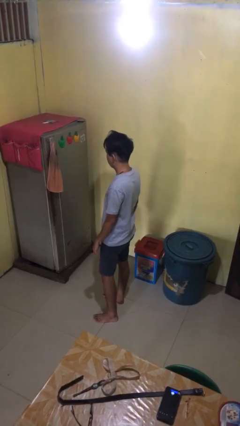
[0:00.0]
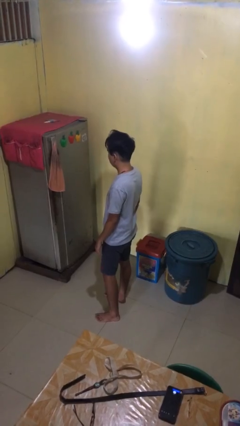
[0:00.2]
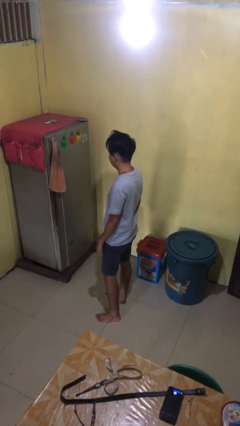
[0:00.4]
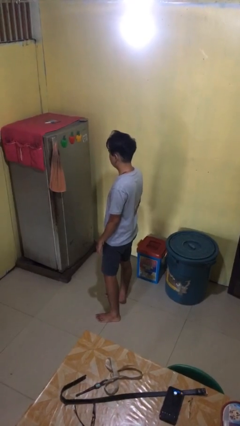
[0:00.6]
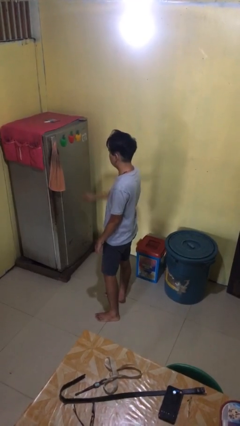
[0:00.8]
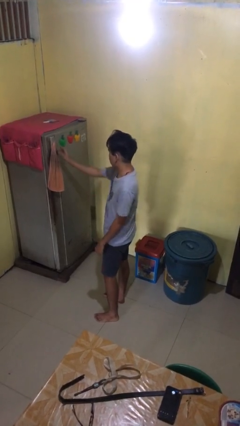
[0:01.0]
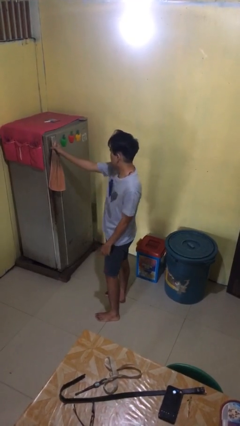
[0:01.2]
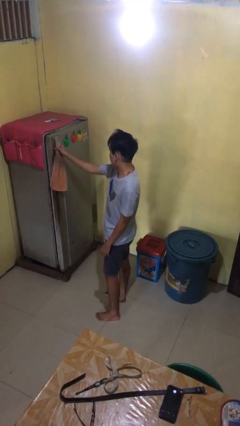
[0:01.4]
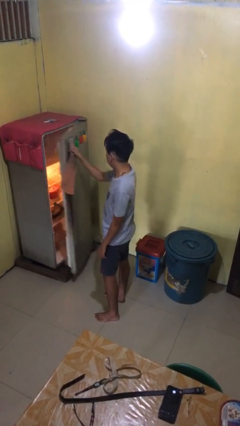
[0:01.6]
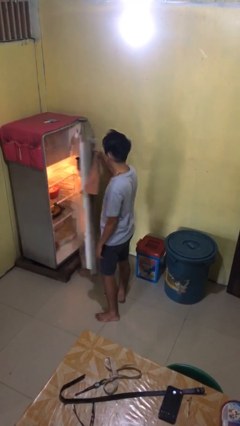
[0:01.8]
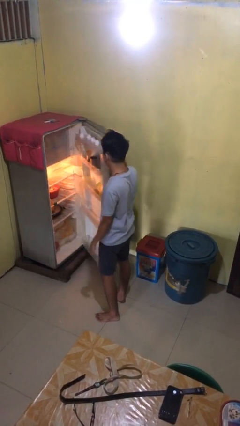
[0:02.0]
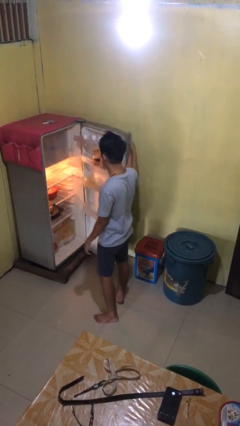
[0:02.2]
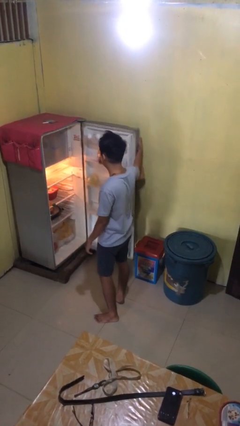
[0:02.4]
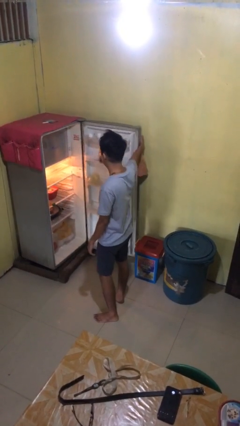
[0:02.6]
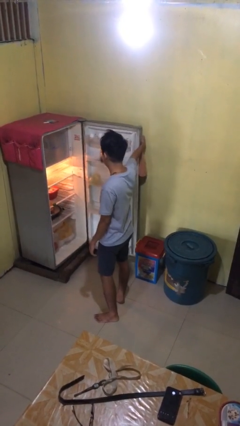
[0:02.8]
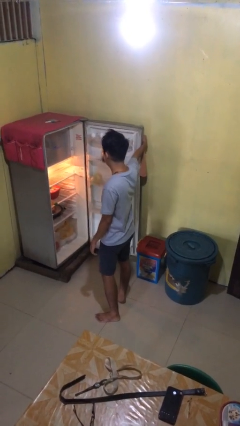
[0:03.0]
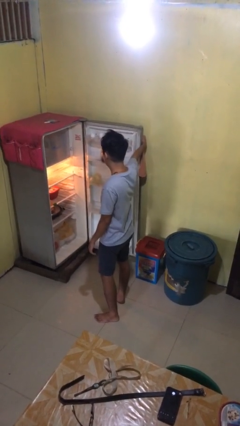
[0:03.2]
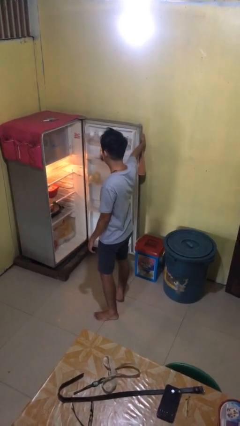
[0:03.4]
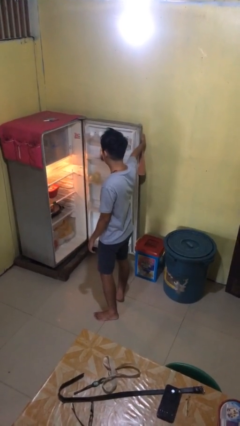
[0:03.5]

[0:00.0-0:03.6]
person opens refrigerator

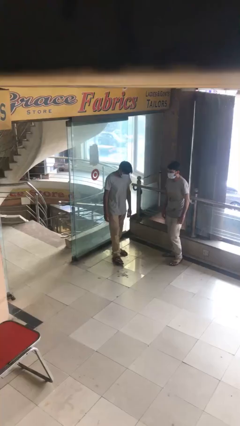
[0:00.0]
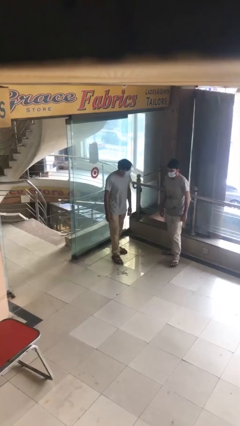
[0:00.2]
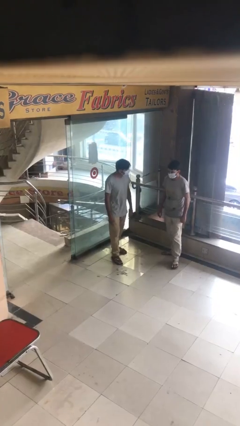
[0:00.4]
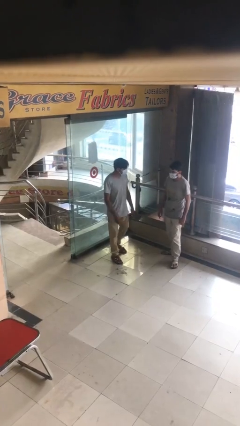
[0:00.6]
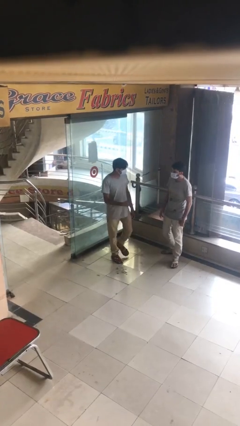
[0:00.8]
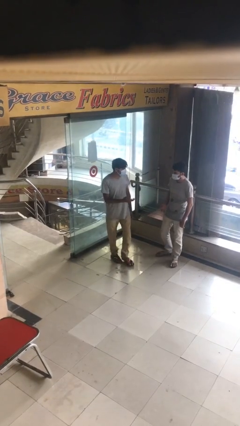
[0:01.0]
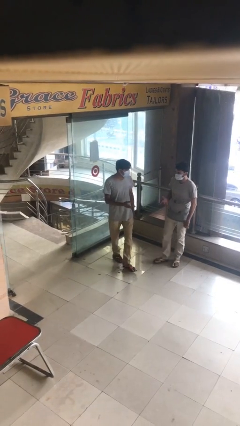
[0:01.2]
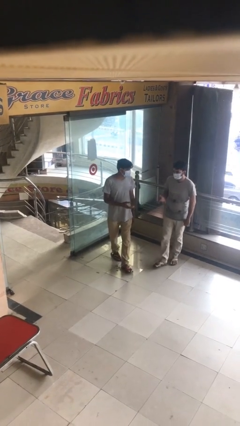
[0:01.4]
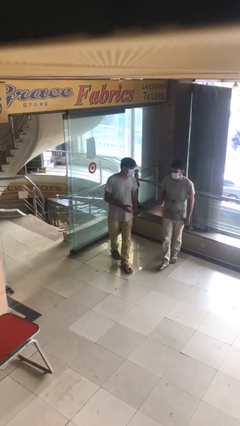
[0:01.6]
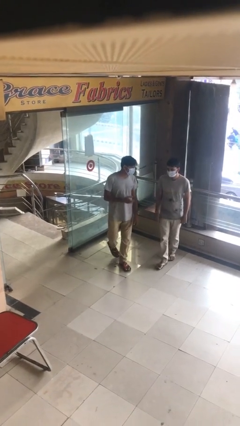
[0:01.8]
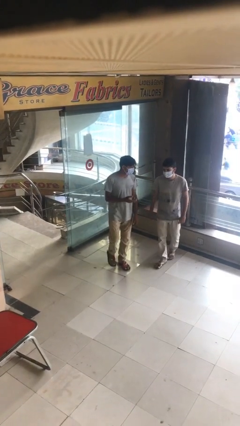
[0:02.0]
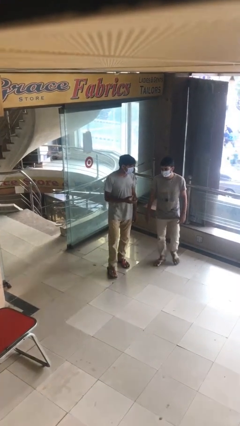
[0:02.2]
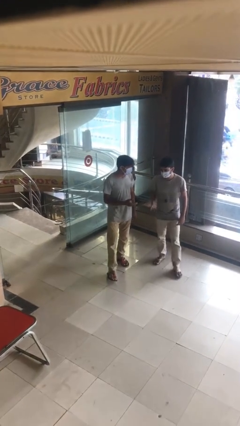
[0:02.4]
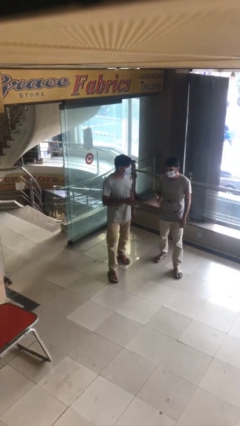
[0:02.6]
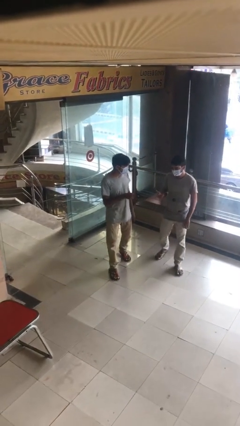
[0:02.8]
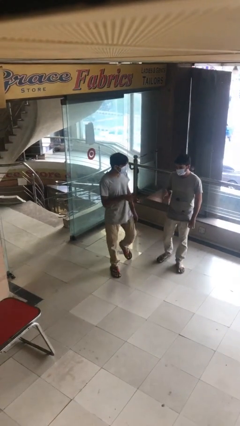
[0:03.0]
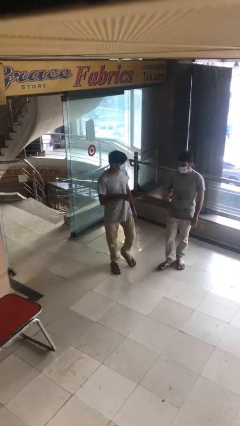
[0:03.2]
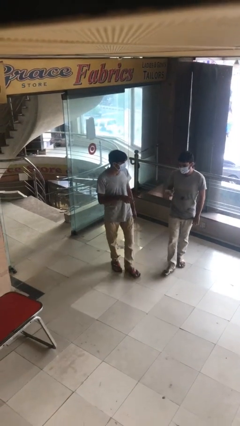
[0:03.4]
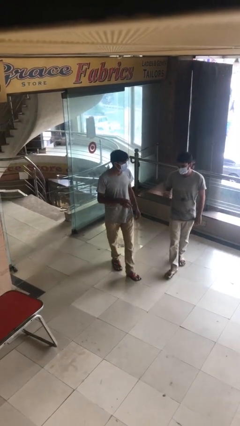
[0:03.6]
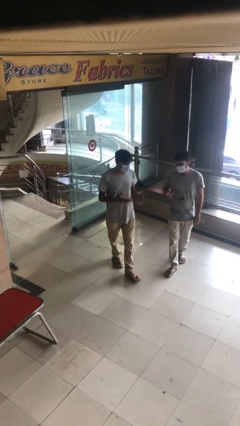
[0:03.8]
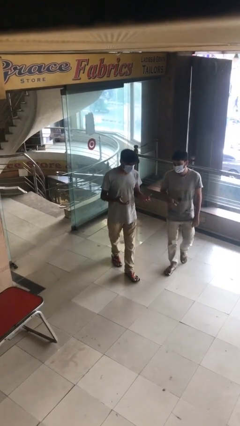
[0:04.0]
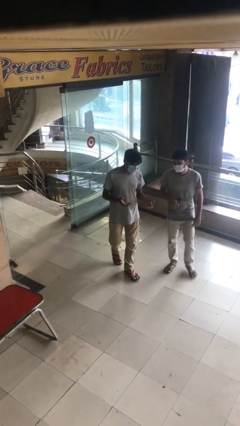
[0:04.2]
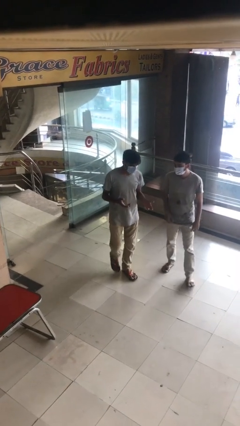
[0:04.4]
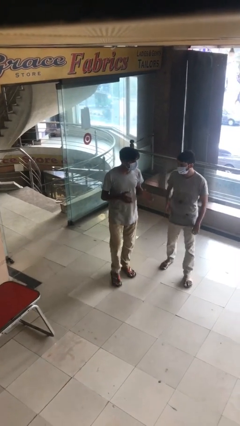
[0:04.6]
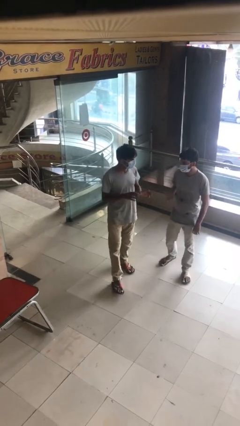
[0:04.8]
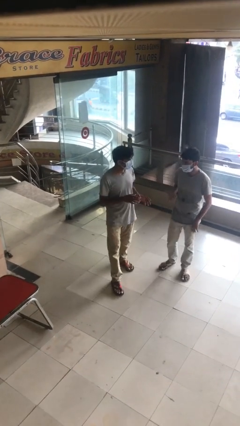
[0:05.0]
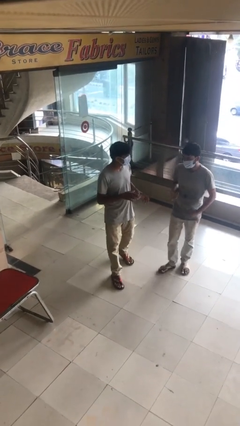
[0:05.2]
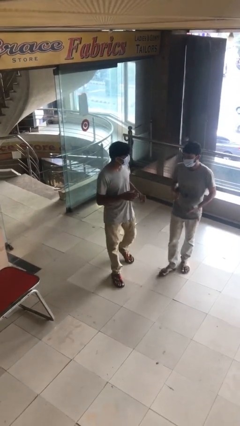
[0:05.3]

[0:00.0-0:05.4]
person talks to person

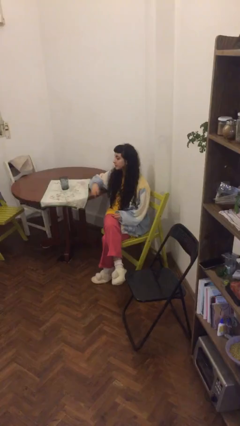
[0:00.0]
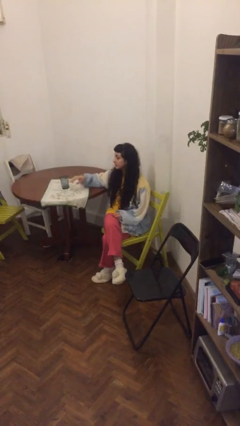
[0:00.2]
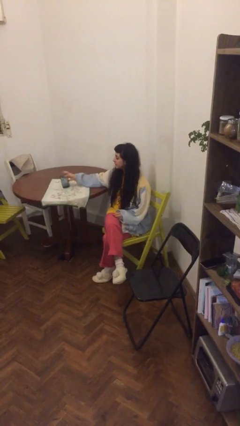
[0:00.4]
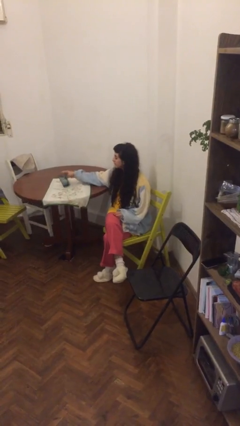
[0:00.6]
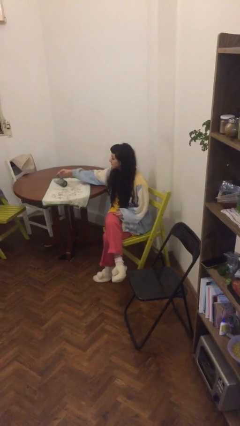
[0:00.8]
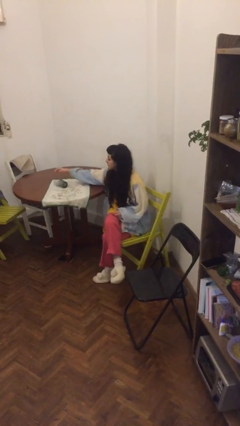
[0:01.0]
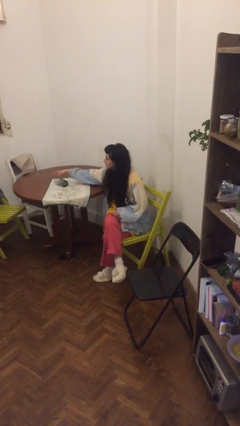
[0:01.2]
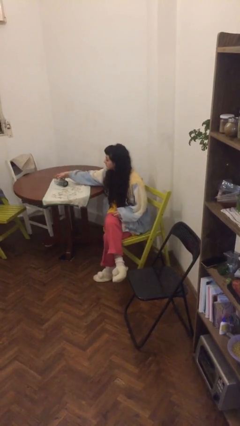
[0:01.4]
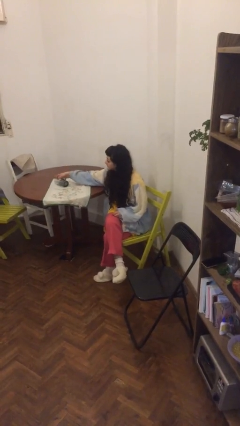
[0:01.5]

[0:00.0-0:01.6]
person knocks over glass

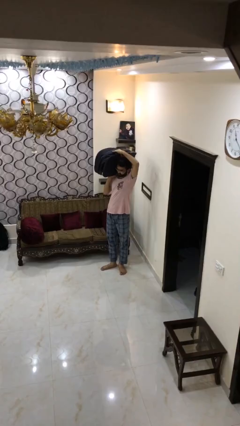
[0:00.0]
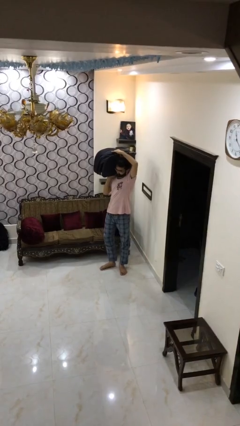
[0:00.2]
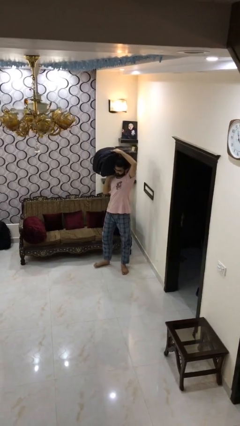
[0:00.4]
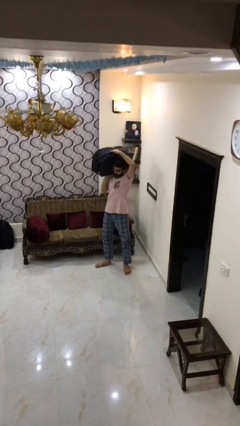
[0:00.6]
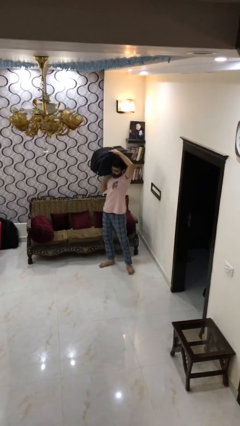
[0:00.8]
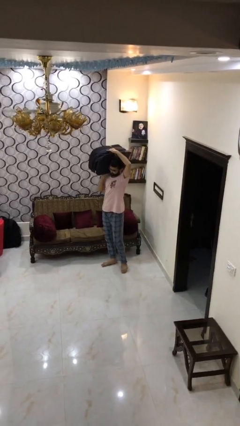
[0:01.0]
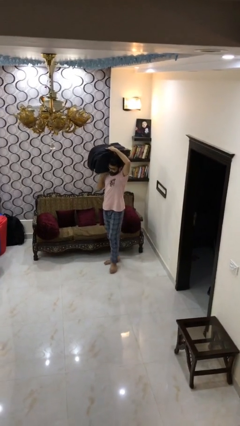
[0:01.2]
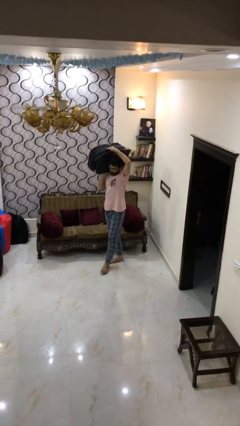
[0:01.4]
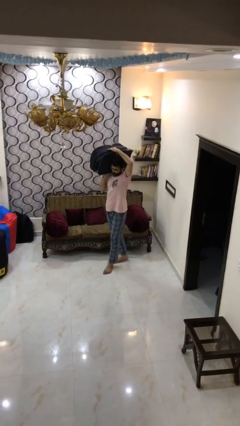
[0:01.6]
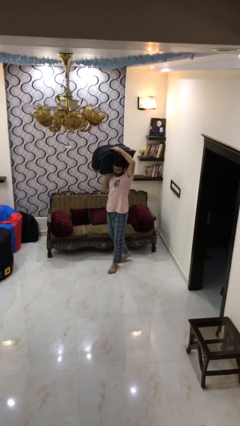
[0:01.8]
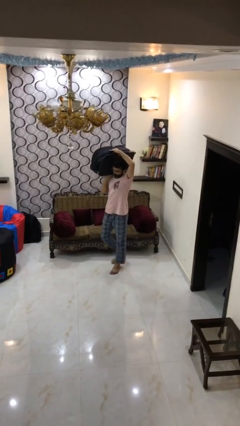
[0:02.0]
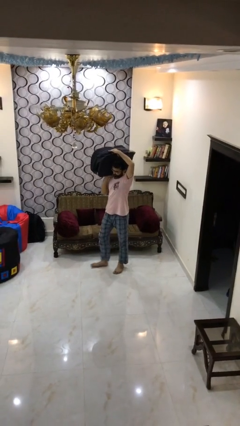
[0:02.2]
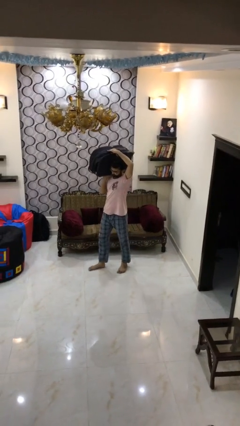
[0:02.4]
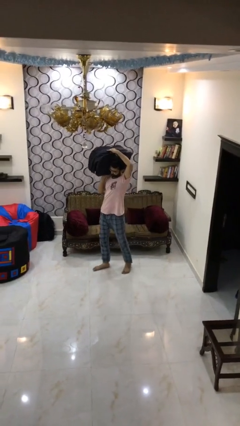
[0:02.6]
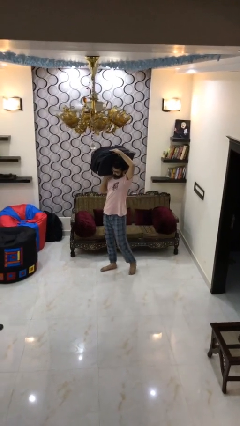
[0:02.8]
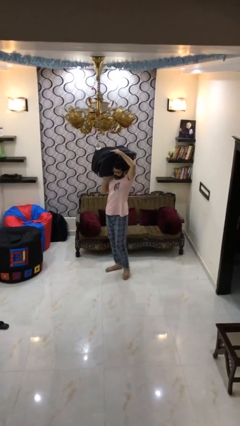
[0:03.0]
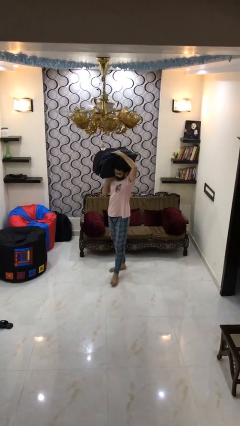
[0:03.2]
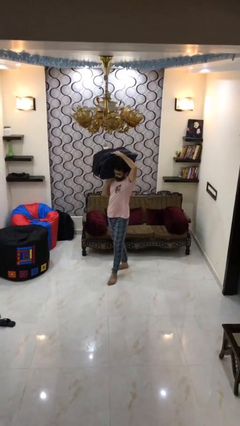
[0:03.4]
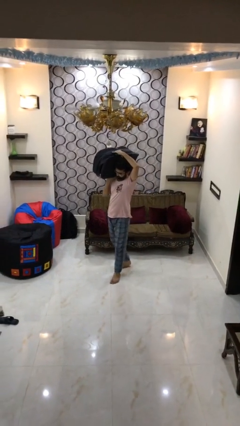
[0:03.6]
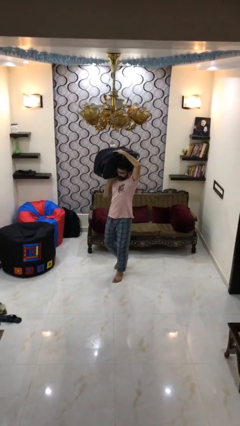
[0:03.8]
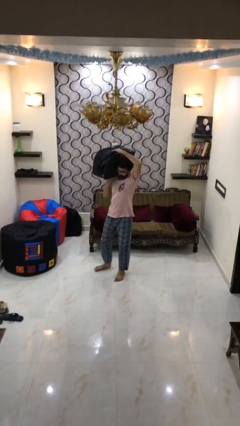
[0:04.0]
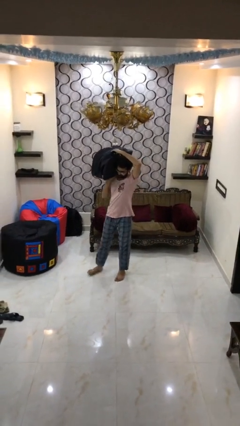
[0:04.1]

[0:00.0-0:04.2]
person carries heavy object

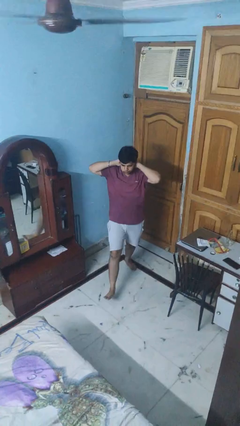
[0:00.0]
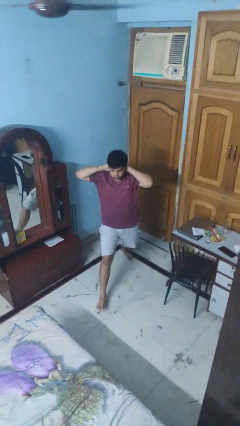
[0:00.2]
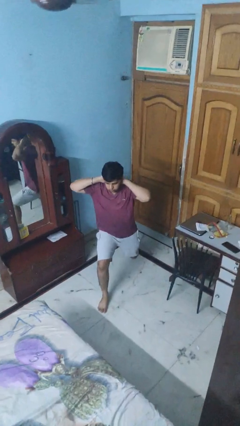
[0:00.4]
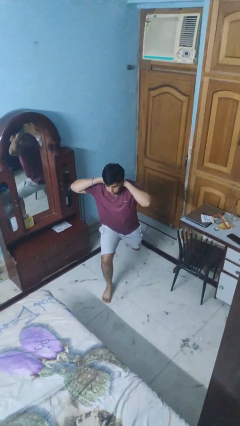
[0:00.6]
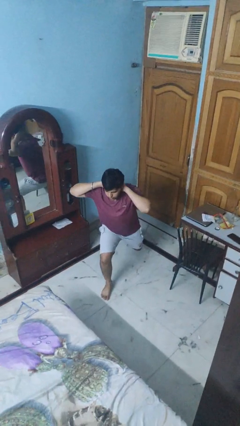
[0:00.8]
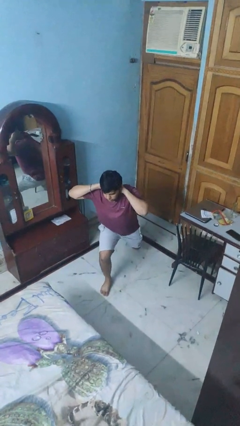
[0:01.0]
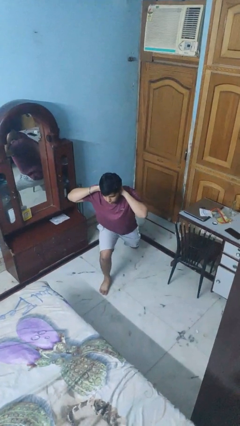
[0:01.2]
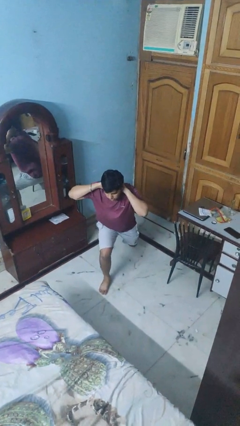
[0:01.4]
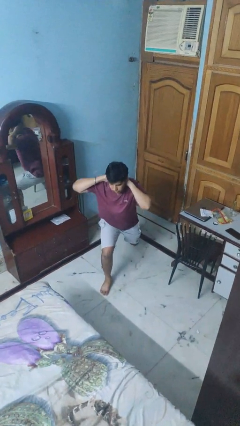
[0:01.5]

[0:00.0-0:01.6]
person exercises with lunges

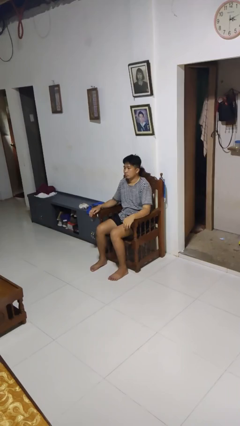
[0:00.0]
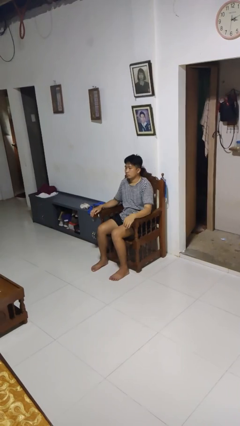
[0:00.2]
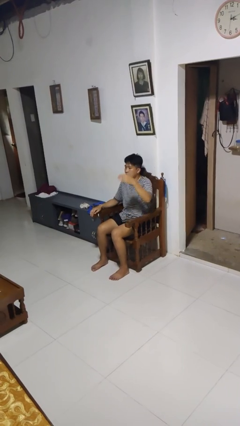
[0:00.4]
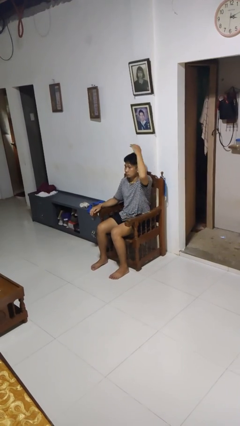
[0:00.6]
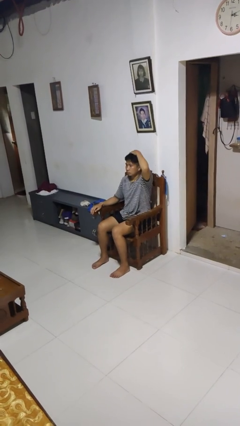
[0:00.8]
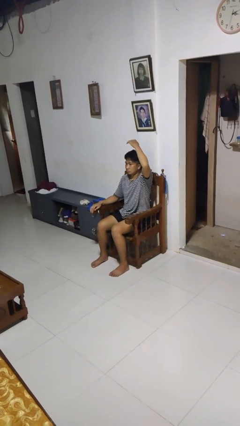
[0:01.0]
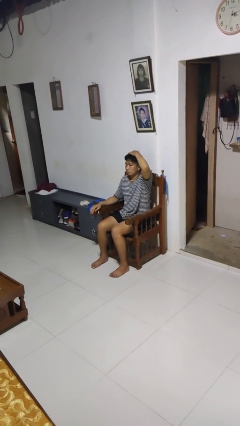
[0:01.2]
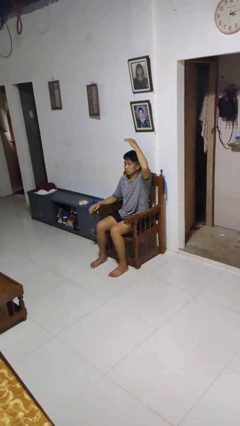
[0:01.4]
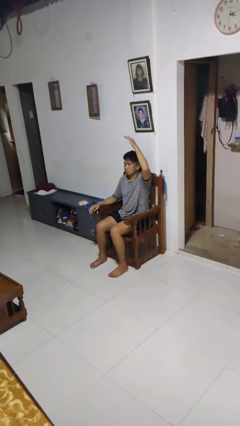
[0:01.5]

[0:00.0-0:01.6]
person pats head
